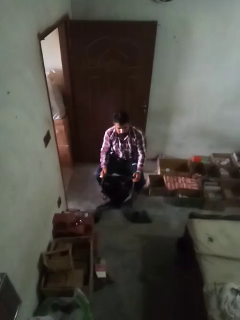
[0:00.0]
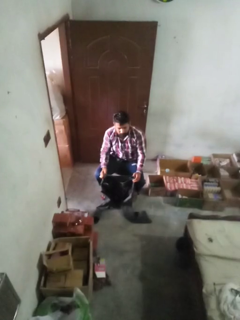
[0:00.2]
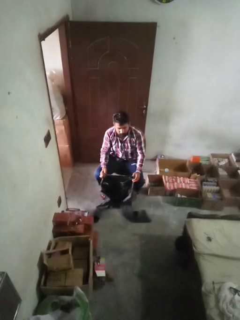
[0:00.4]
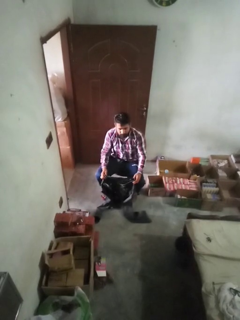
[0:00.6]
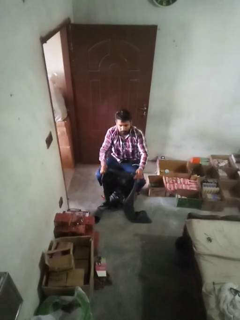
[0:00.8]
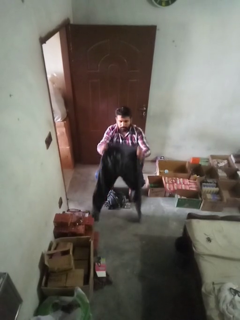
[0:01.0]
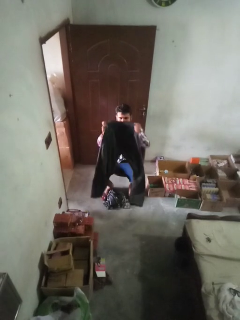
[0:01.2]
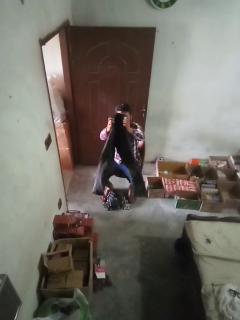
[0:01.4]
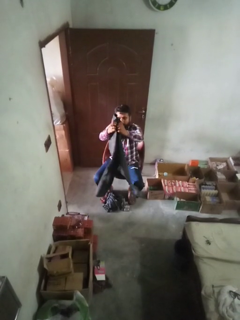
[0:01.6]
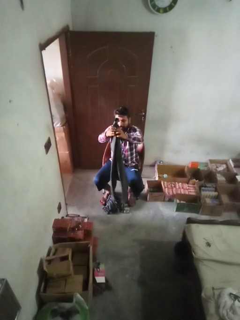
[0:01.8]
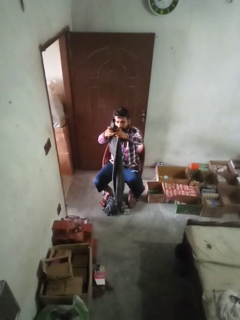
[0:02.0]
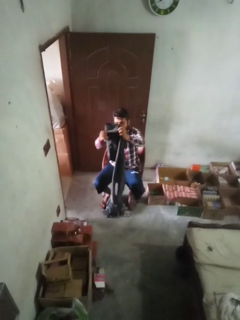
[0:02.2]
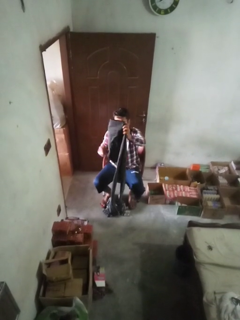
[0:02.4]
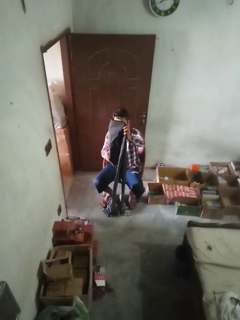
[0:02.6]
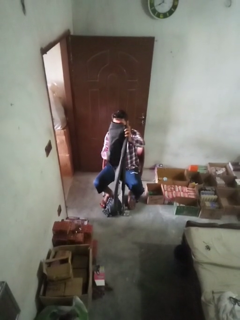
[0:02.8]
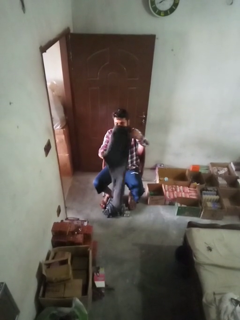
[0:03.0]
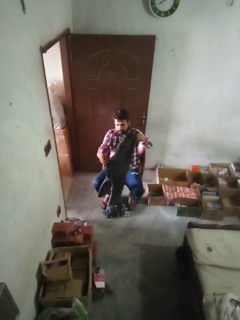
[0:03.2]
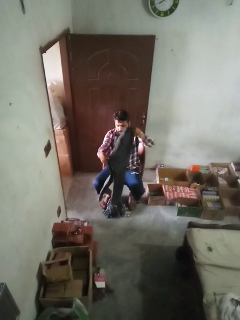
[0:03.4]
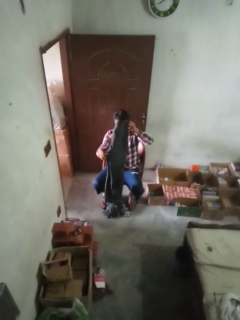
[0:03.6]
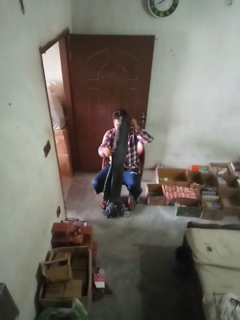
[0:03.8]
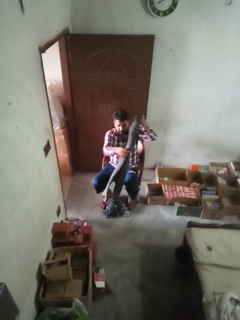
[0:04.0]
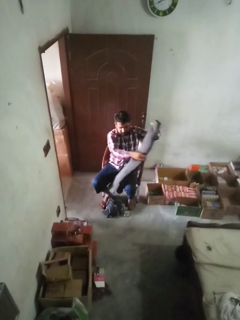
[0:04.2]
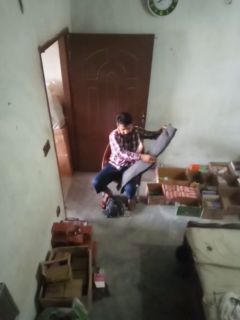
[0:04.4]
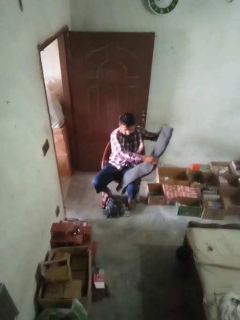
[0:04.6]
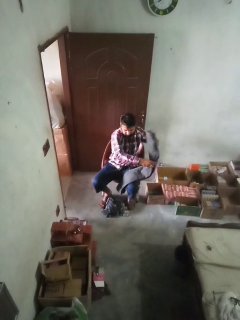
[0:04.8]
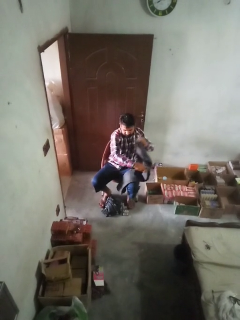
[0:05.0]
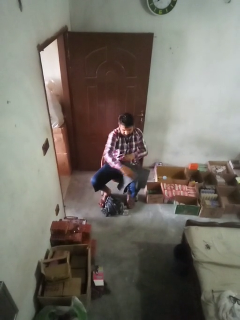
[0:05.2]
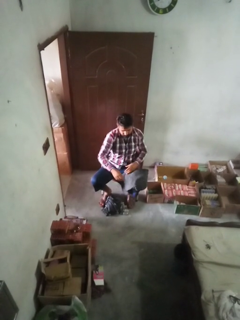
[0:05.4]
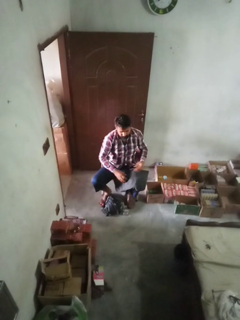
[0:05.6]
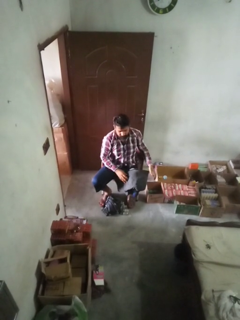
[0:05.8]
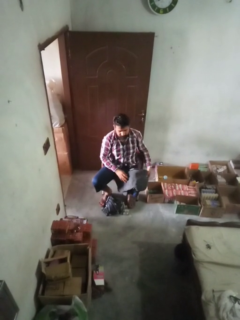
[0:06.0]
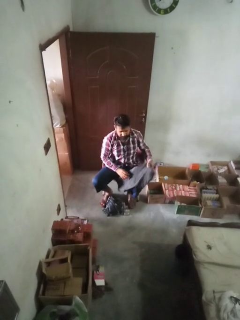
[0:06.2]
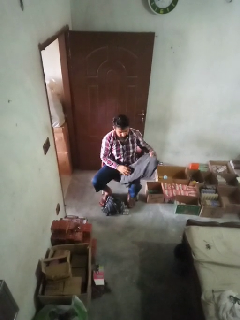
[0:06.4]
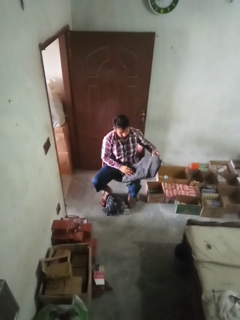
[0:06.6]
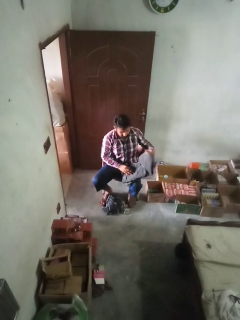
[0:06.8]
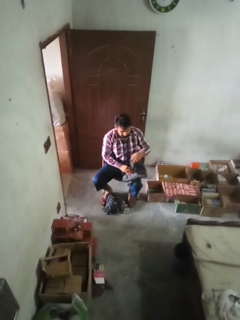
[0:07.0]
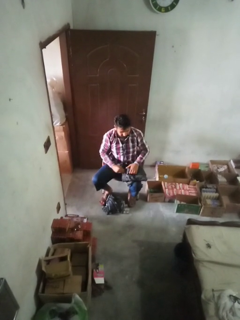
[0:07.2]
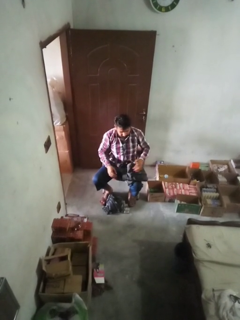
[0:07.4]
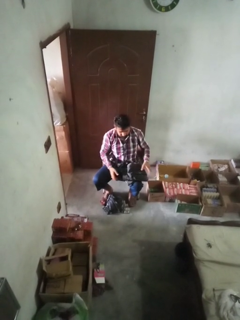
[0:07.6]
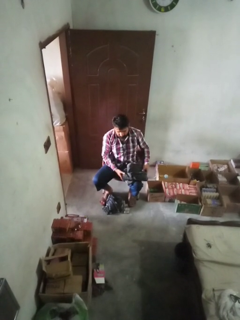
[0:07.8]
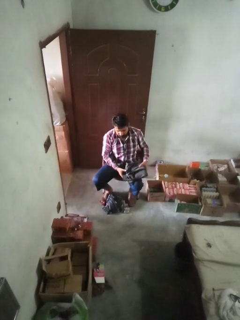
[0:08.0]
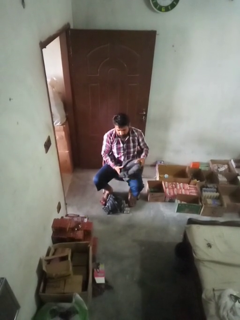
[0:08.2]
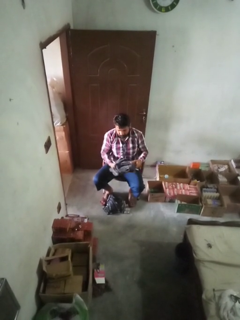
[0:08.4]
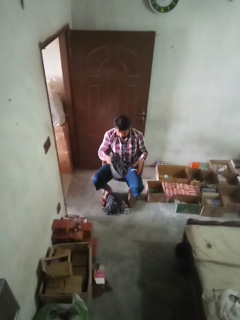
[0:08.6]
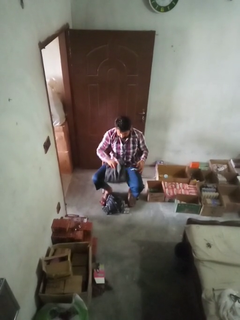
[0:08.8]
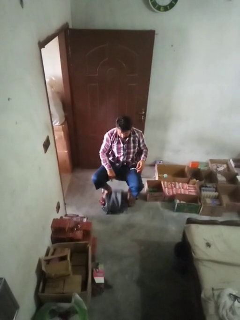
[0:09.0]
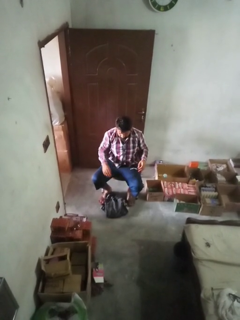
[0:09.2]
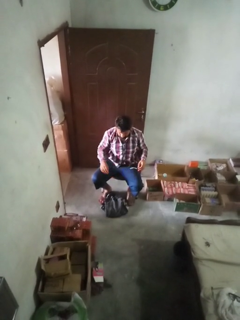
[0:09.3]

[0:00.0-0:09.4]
person folds pants

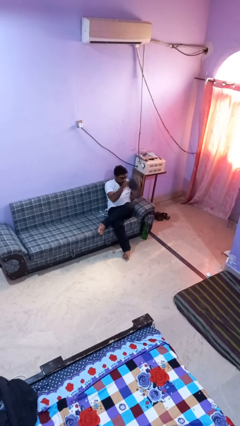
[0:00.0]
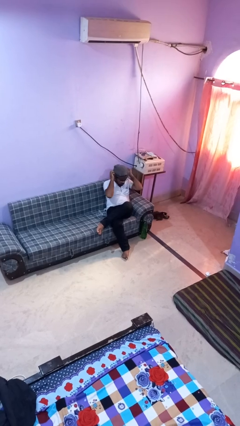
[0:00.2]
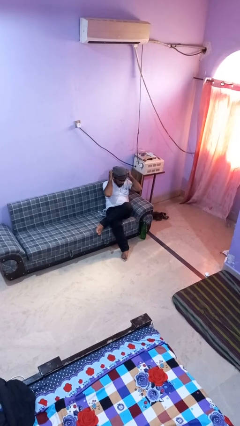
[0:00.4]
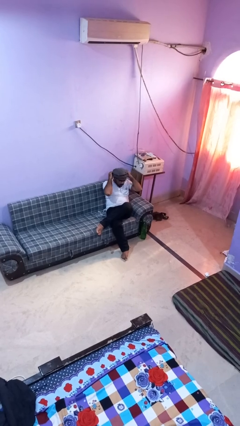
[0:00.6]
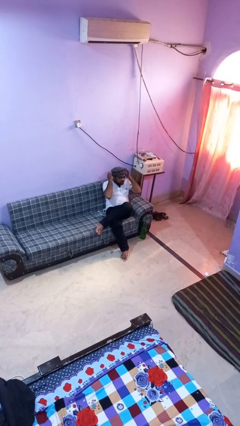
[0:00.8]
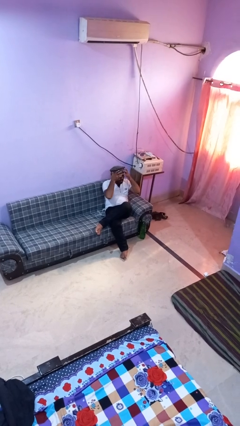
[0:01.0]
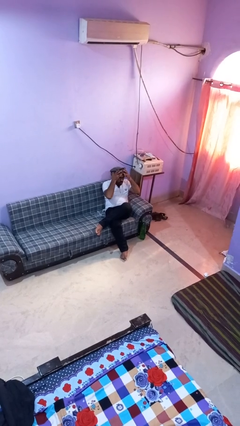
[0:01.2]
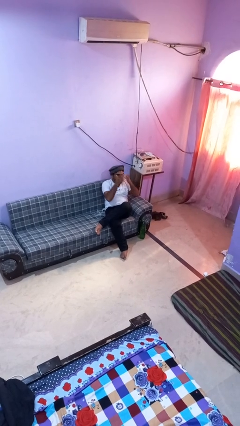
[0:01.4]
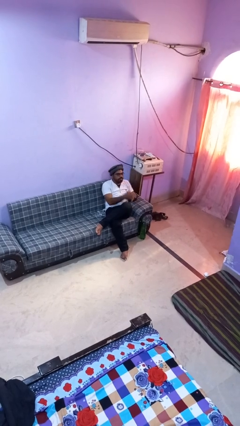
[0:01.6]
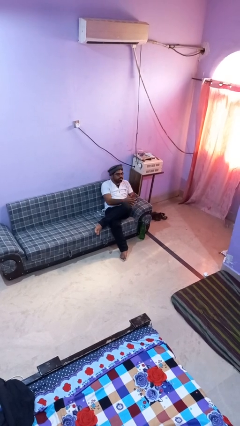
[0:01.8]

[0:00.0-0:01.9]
person puts on hat

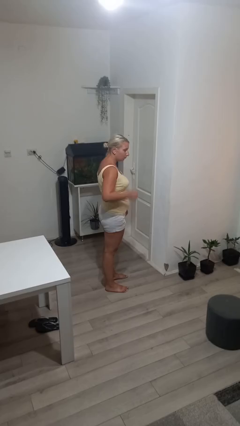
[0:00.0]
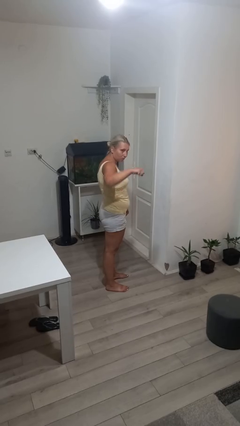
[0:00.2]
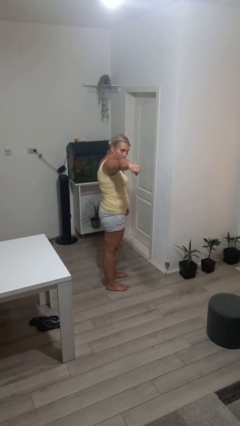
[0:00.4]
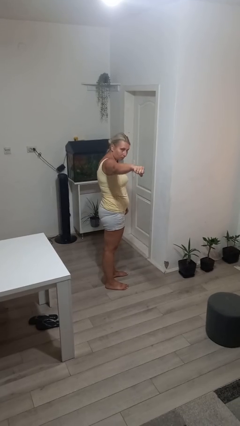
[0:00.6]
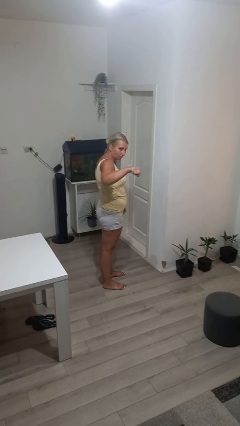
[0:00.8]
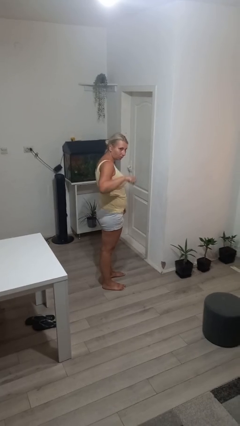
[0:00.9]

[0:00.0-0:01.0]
person karate chop

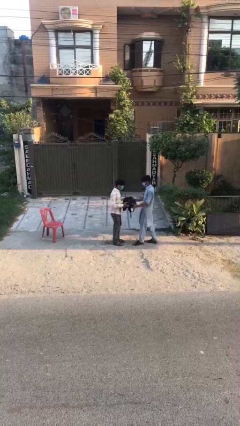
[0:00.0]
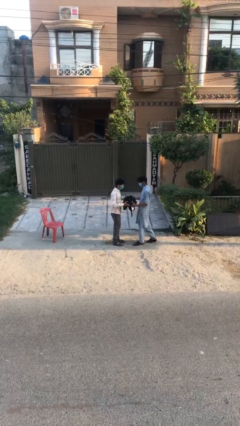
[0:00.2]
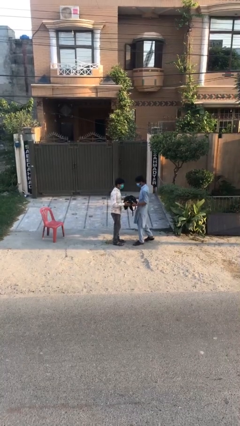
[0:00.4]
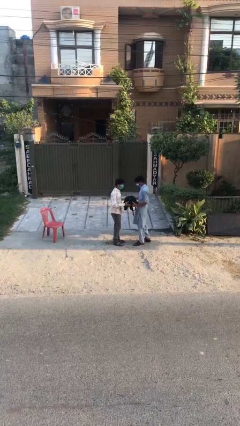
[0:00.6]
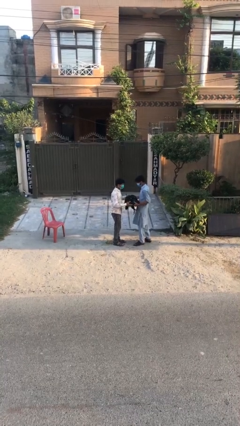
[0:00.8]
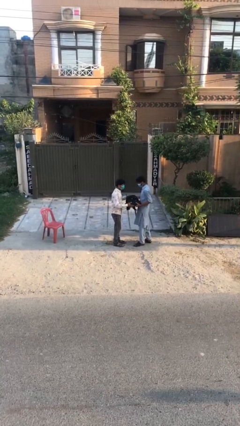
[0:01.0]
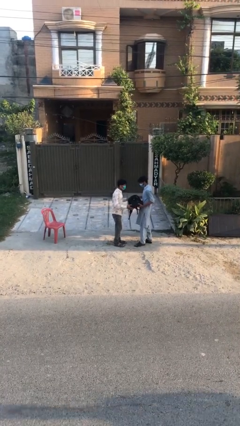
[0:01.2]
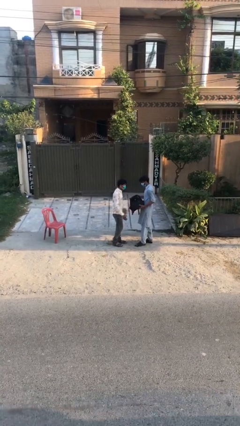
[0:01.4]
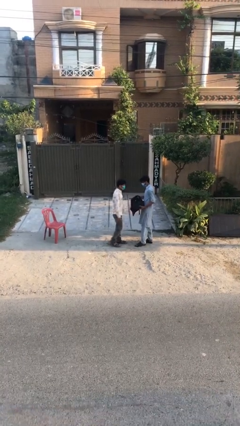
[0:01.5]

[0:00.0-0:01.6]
person transfers object to person

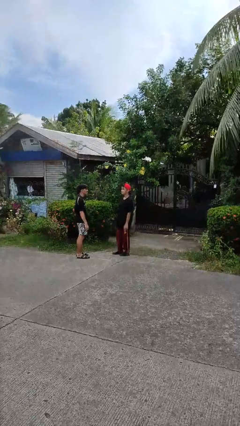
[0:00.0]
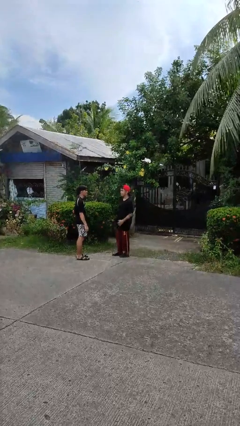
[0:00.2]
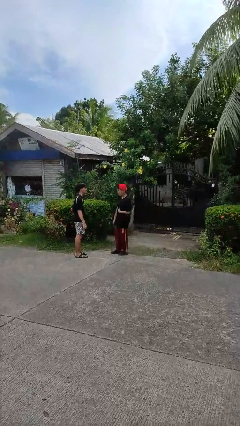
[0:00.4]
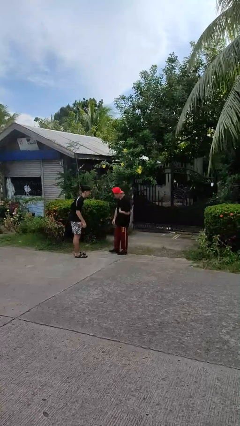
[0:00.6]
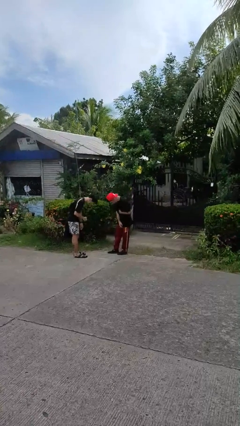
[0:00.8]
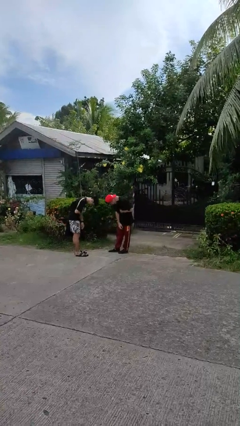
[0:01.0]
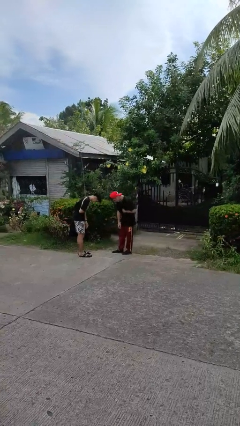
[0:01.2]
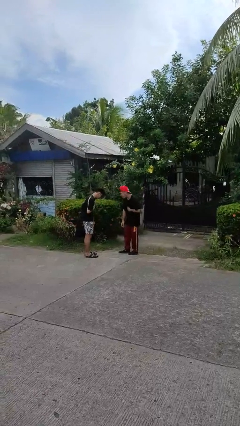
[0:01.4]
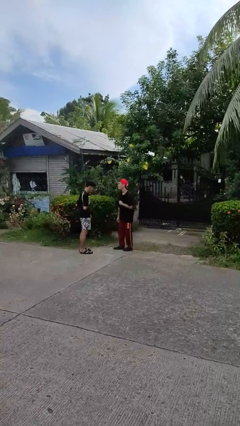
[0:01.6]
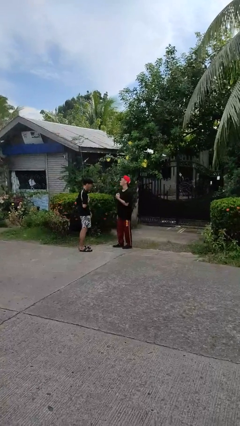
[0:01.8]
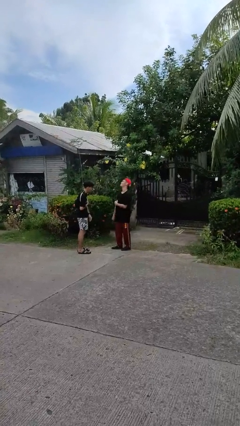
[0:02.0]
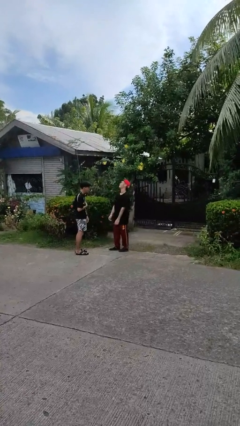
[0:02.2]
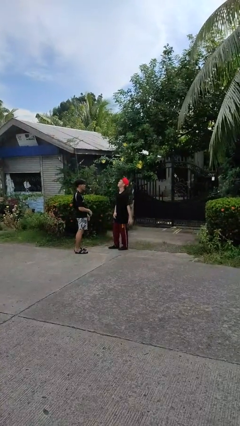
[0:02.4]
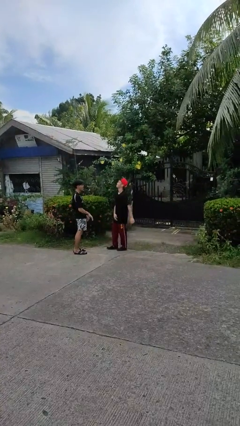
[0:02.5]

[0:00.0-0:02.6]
person laughs with person

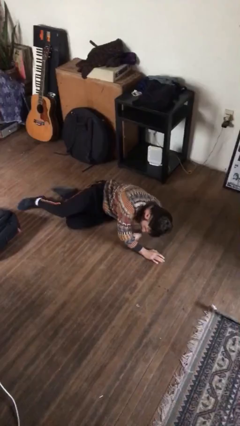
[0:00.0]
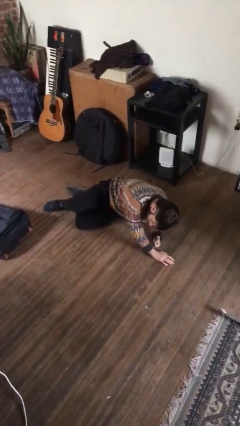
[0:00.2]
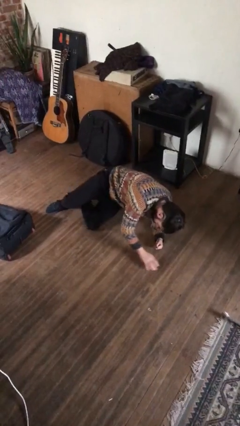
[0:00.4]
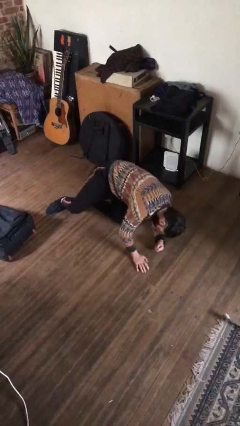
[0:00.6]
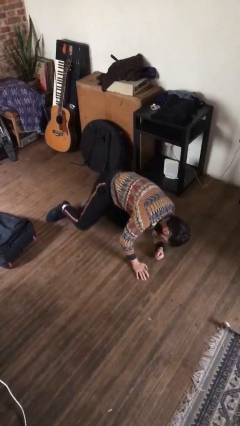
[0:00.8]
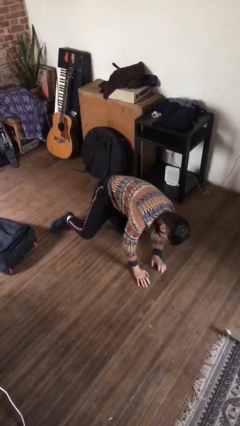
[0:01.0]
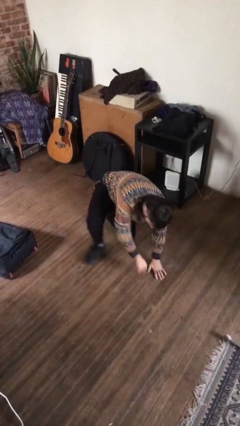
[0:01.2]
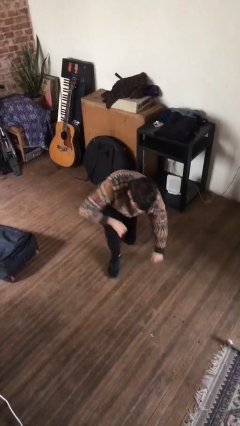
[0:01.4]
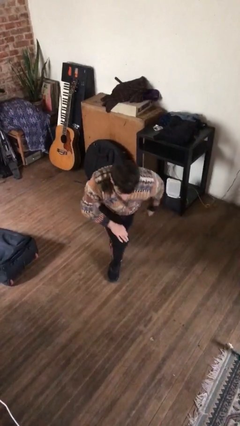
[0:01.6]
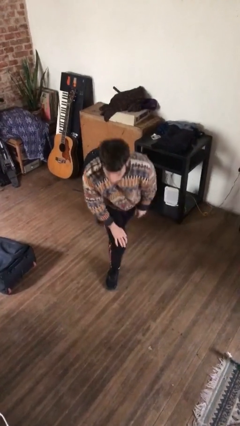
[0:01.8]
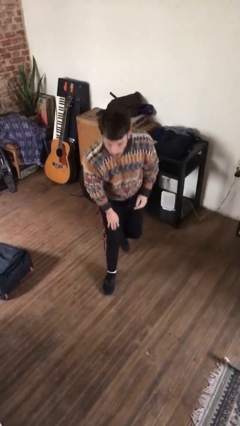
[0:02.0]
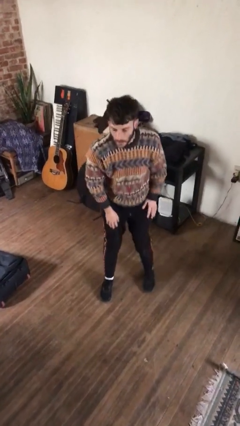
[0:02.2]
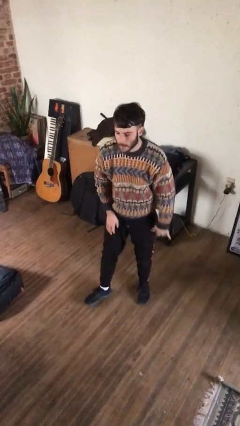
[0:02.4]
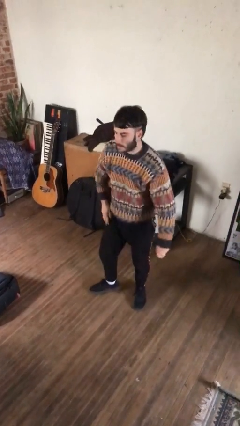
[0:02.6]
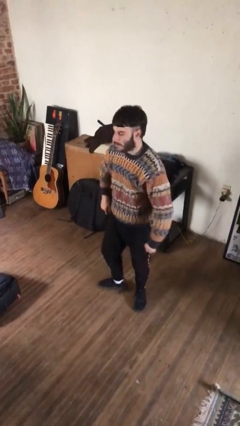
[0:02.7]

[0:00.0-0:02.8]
person stands up from floor
